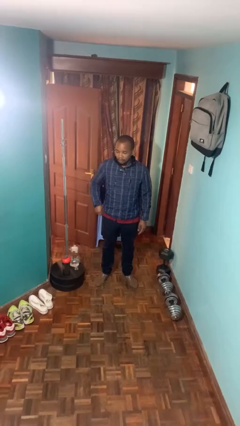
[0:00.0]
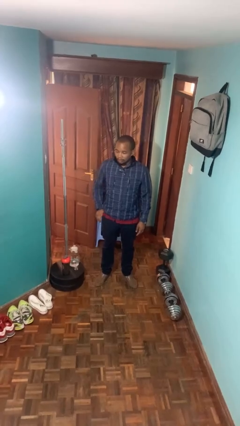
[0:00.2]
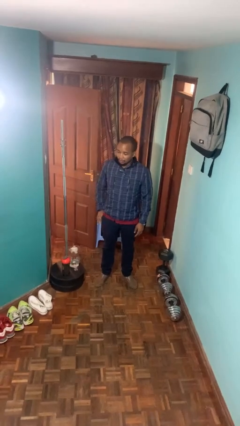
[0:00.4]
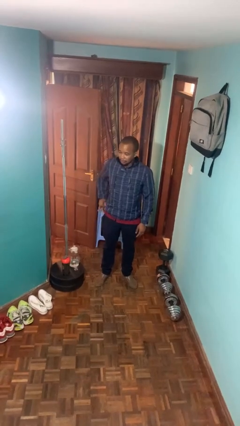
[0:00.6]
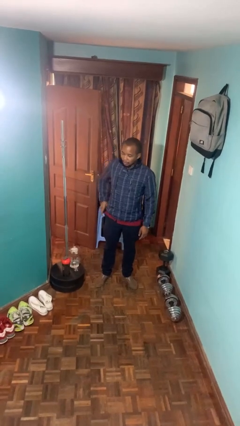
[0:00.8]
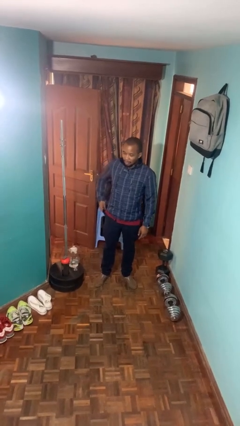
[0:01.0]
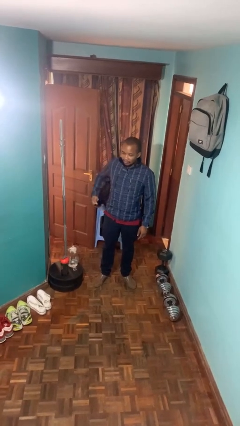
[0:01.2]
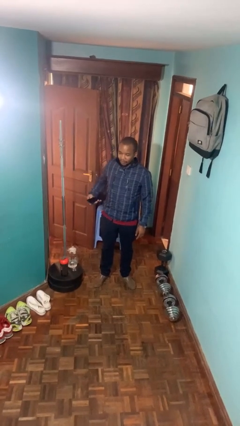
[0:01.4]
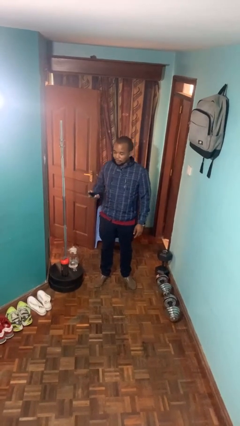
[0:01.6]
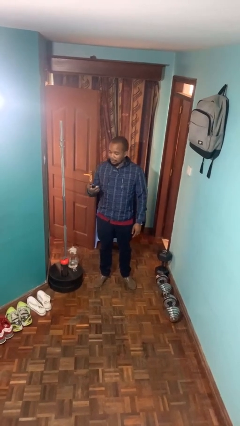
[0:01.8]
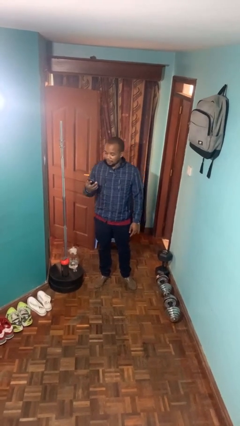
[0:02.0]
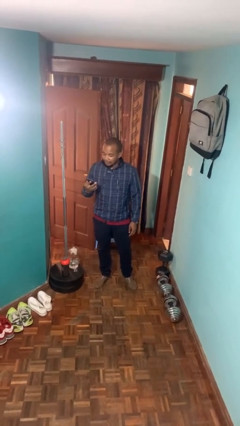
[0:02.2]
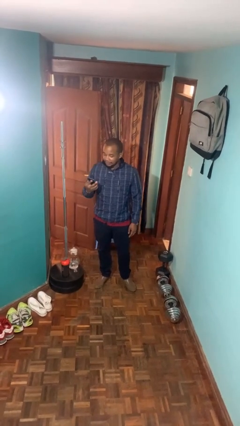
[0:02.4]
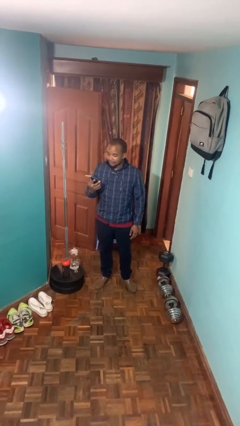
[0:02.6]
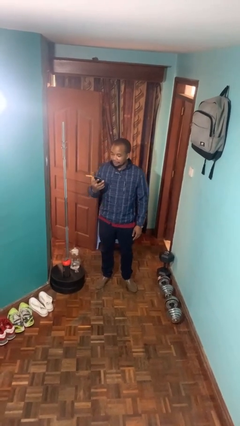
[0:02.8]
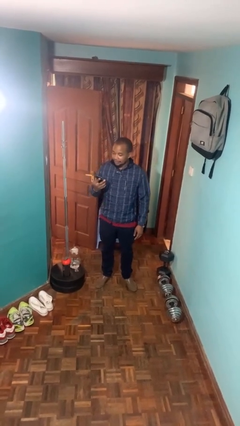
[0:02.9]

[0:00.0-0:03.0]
person takes phone from pocket

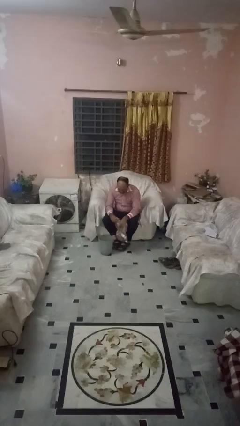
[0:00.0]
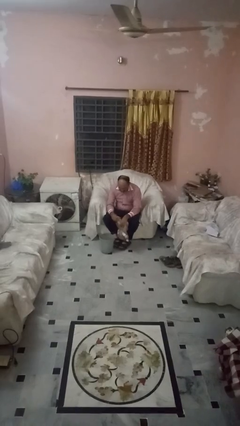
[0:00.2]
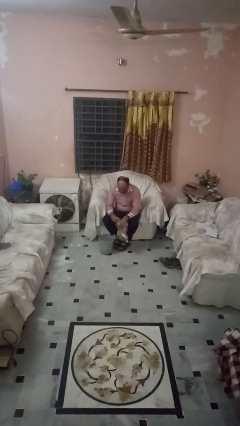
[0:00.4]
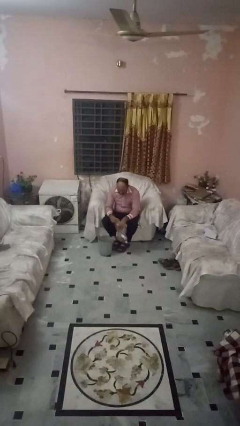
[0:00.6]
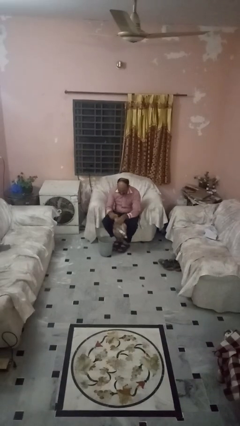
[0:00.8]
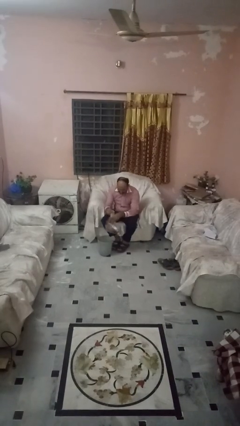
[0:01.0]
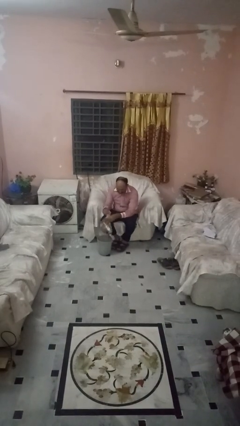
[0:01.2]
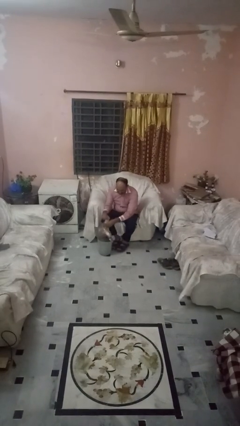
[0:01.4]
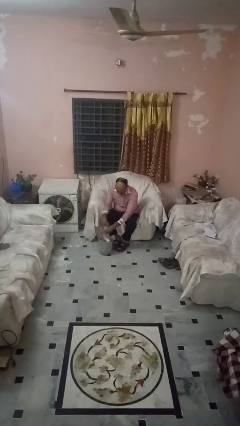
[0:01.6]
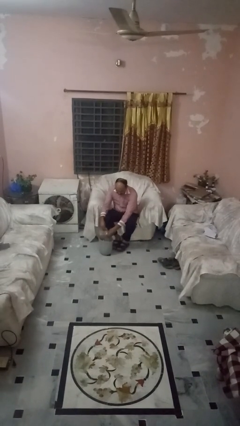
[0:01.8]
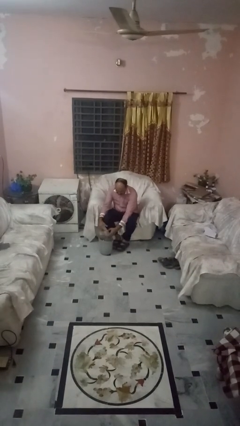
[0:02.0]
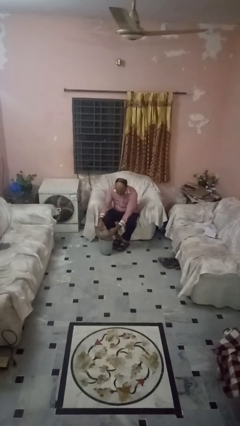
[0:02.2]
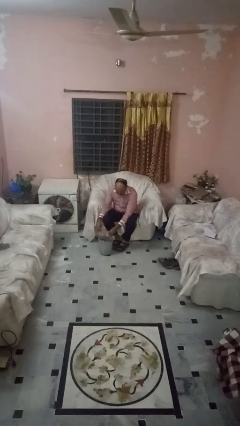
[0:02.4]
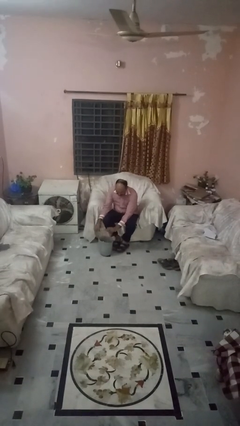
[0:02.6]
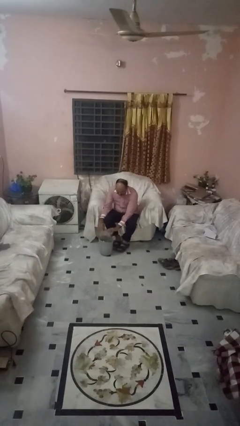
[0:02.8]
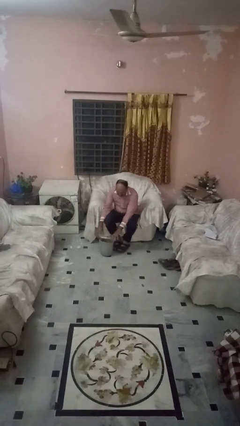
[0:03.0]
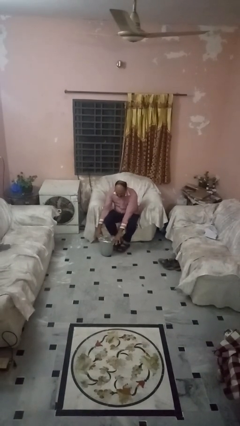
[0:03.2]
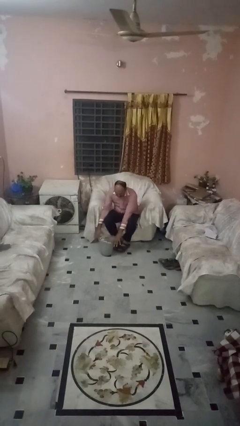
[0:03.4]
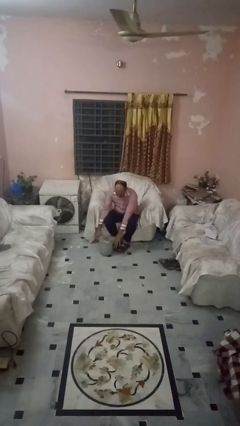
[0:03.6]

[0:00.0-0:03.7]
person inserts trashbag into trashcan

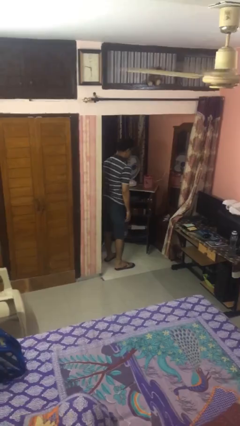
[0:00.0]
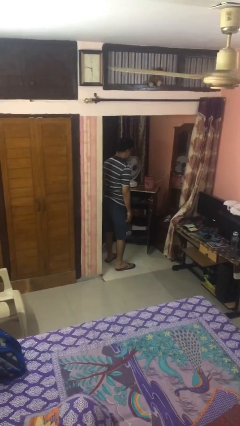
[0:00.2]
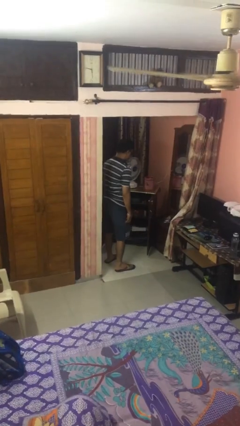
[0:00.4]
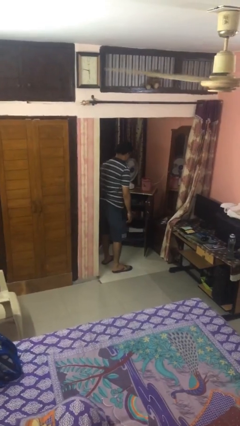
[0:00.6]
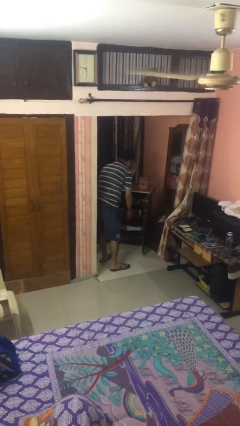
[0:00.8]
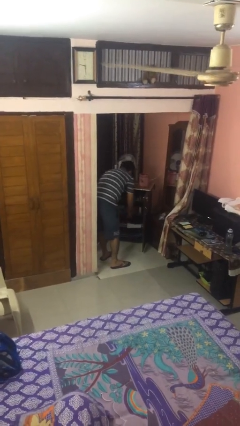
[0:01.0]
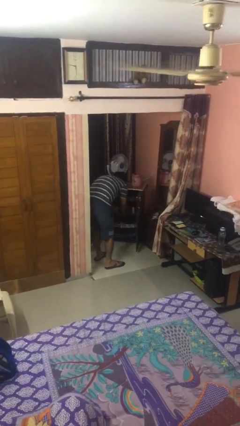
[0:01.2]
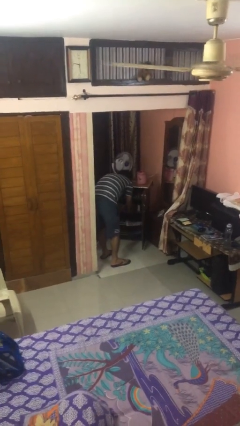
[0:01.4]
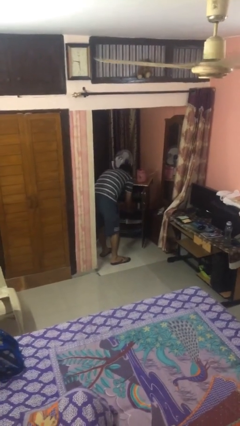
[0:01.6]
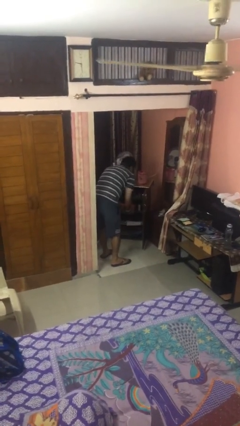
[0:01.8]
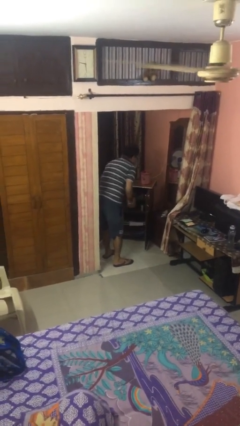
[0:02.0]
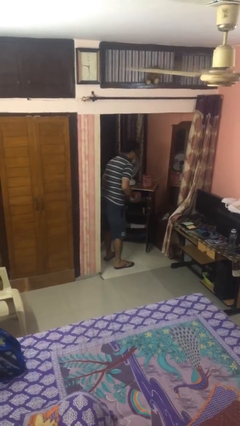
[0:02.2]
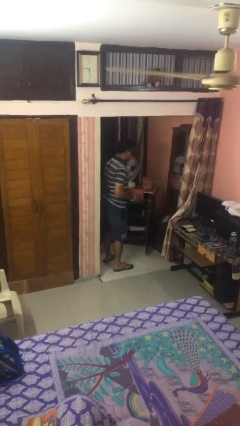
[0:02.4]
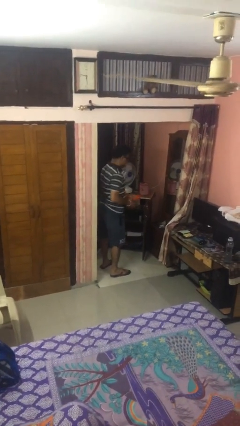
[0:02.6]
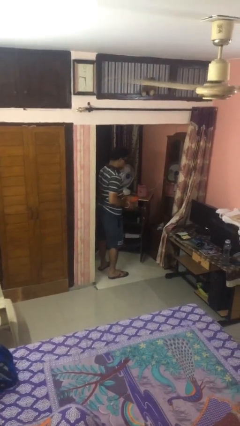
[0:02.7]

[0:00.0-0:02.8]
person picks up object from cabinet

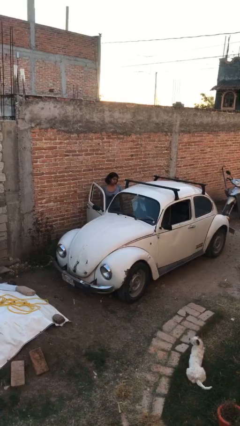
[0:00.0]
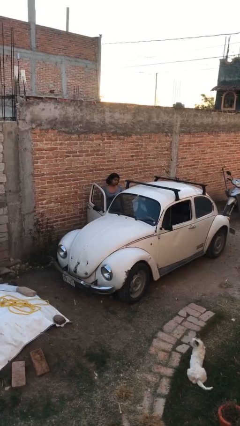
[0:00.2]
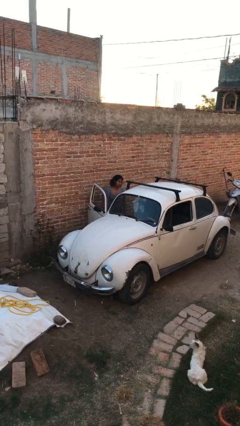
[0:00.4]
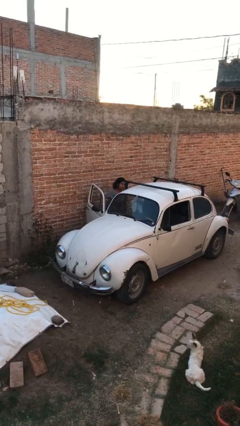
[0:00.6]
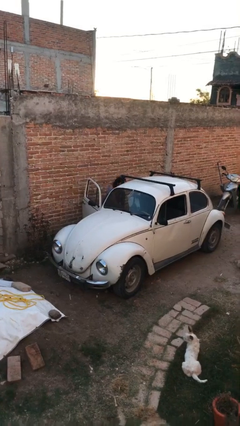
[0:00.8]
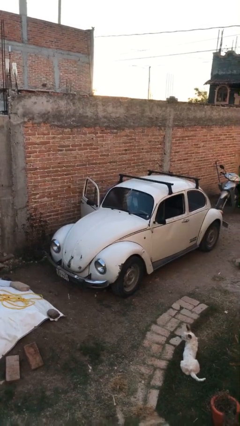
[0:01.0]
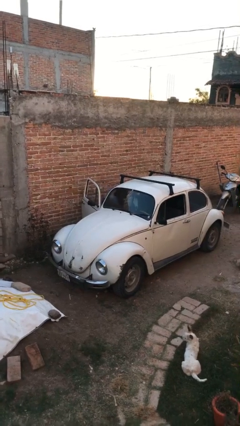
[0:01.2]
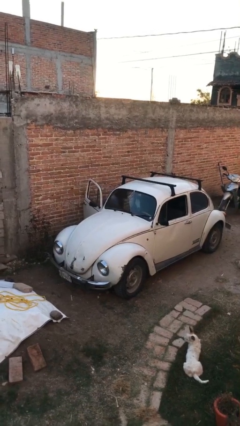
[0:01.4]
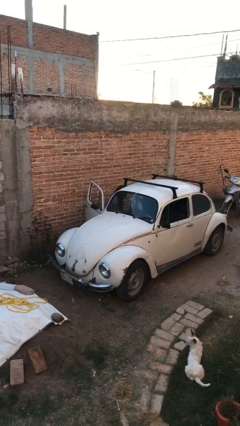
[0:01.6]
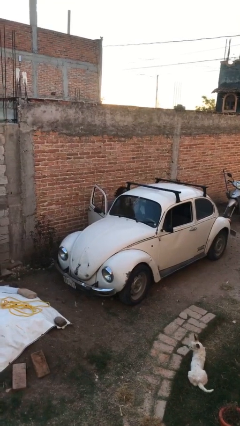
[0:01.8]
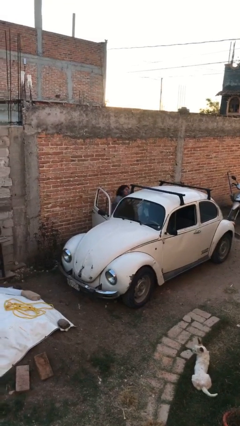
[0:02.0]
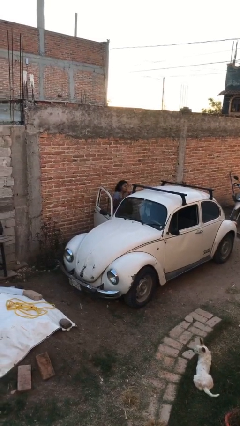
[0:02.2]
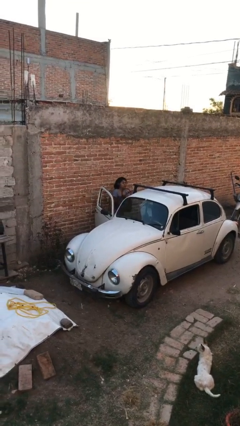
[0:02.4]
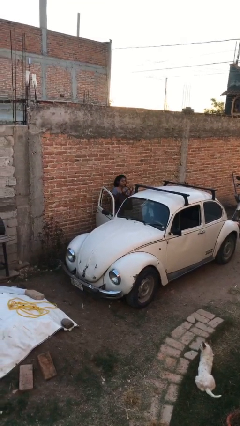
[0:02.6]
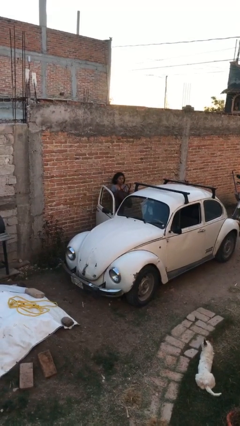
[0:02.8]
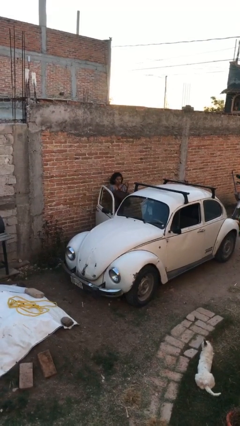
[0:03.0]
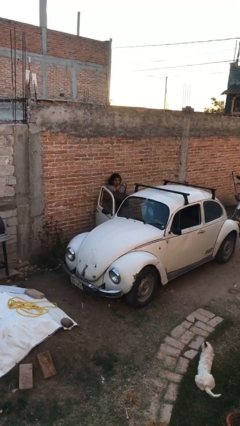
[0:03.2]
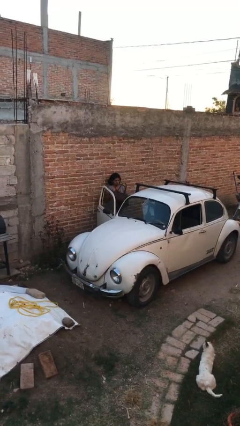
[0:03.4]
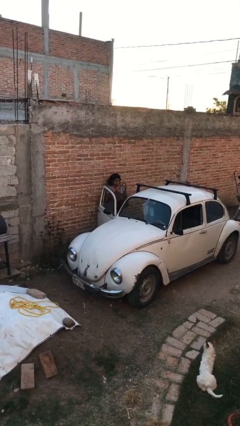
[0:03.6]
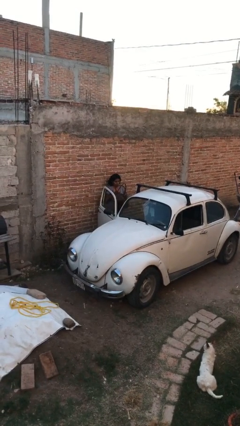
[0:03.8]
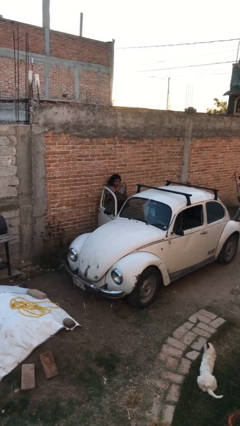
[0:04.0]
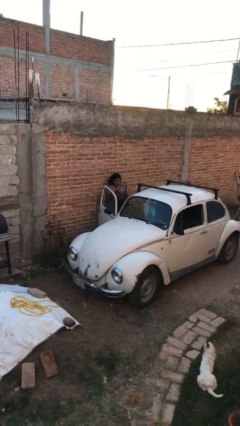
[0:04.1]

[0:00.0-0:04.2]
person unloads car

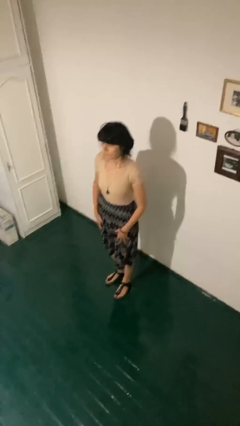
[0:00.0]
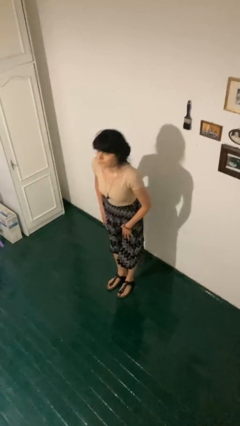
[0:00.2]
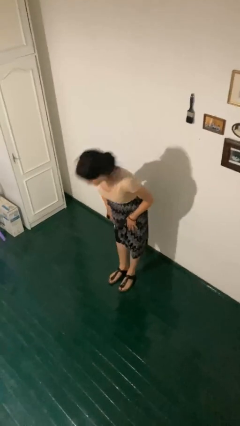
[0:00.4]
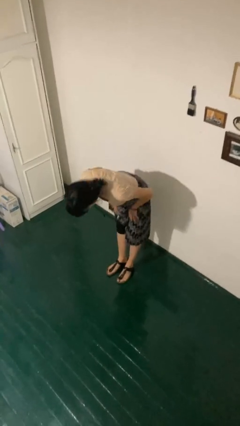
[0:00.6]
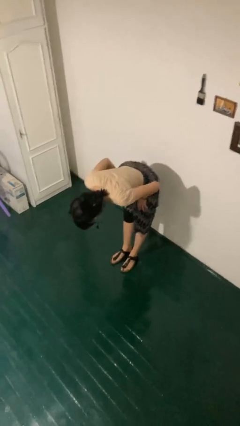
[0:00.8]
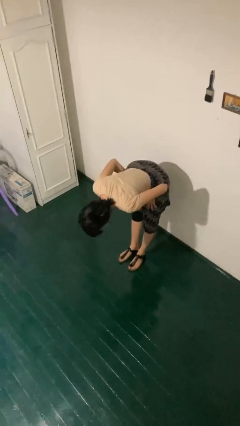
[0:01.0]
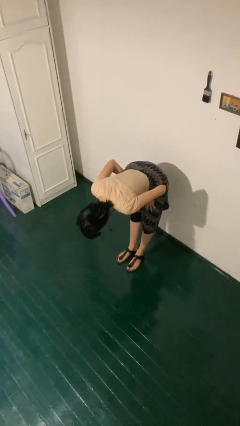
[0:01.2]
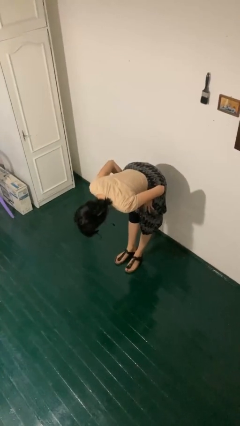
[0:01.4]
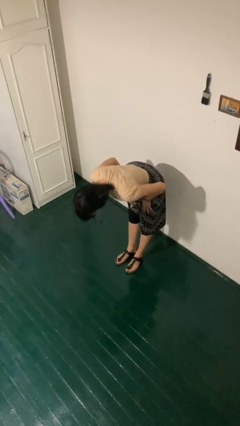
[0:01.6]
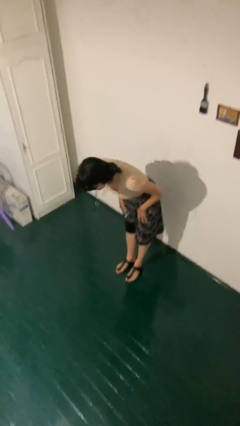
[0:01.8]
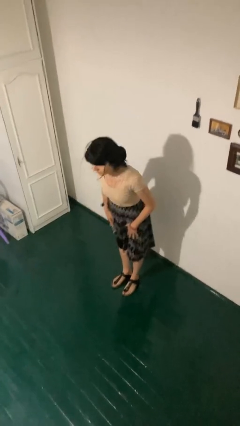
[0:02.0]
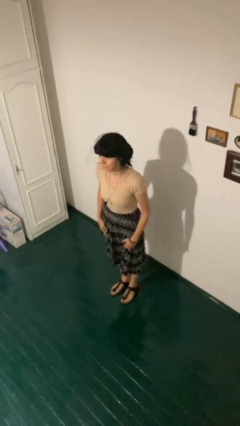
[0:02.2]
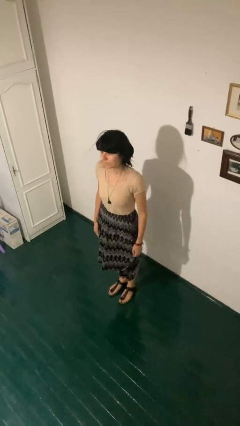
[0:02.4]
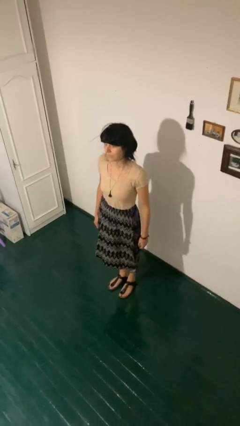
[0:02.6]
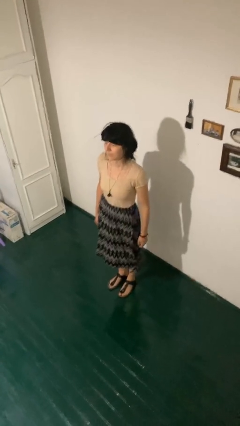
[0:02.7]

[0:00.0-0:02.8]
person bows

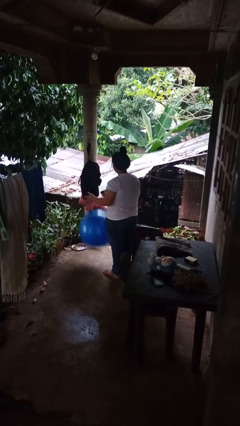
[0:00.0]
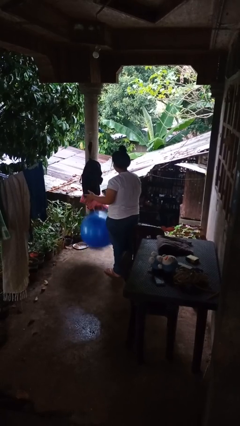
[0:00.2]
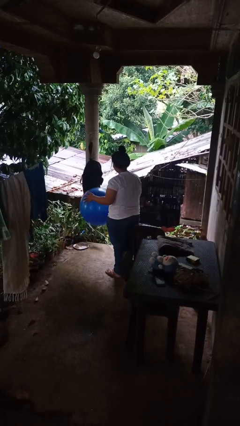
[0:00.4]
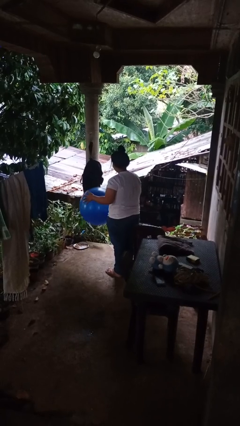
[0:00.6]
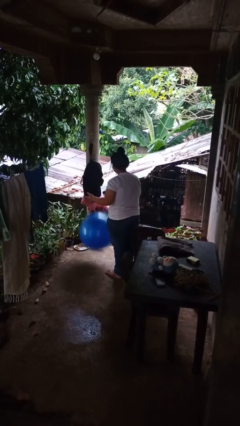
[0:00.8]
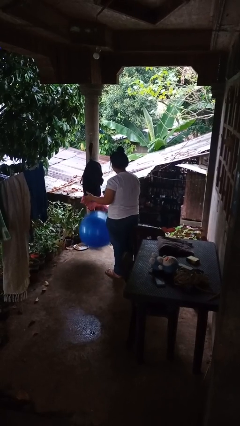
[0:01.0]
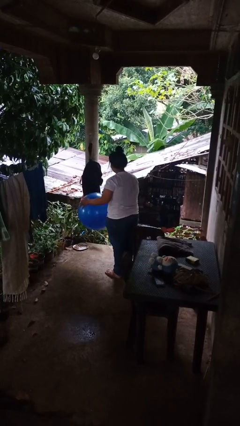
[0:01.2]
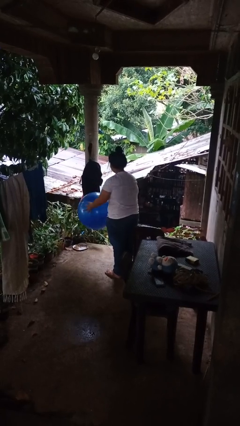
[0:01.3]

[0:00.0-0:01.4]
person bounces ball on floor
